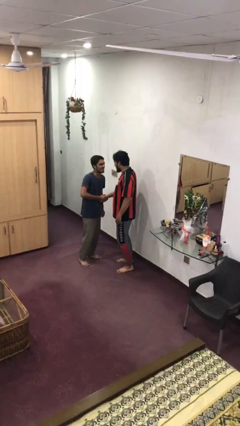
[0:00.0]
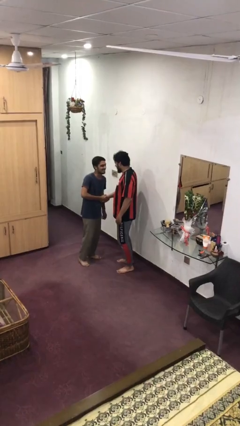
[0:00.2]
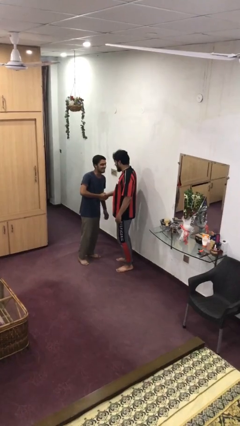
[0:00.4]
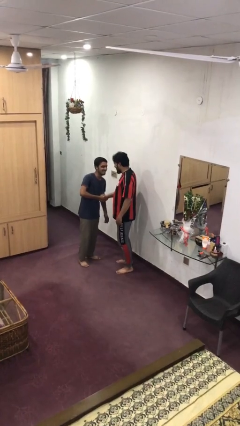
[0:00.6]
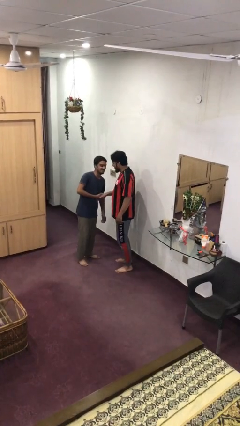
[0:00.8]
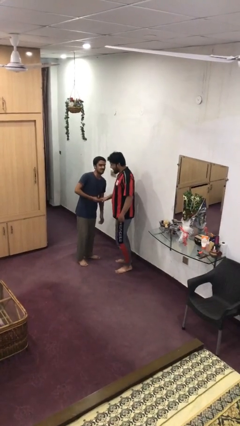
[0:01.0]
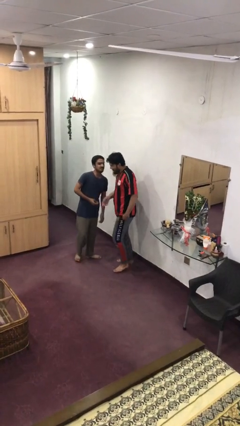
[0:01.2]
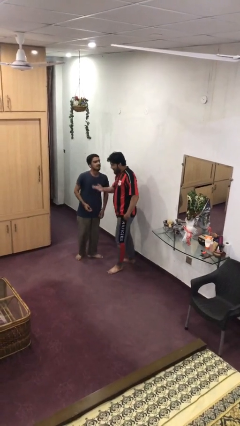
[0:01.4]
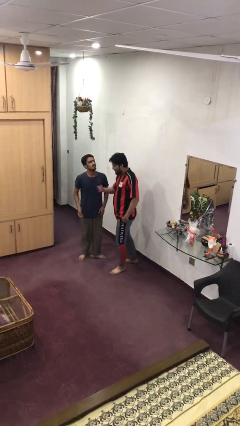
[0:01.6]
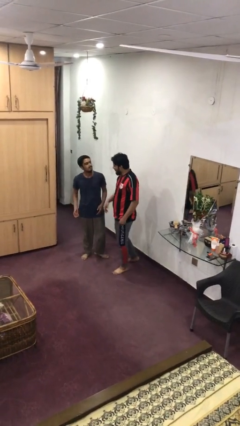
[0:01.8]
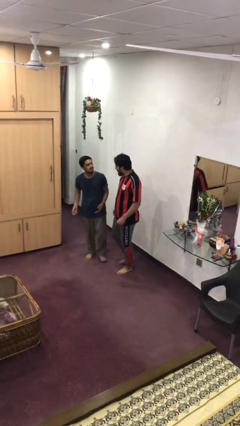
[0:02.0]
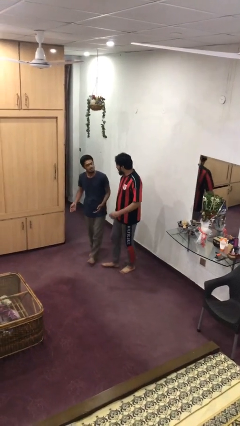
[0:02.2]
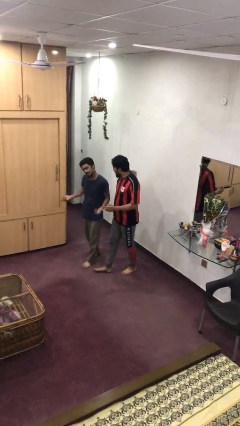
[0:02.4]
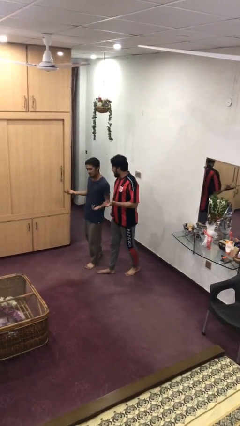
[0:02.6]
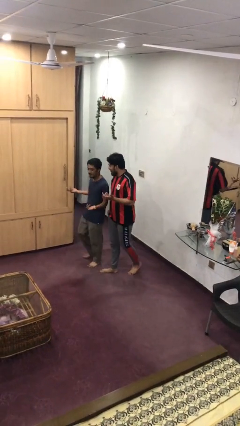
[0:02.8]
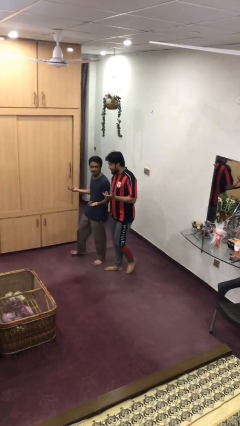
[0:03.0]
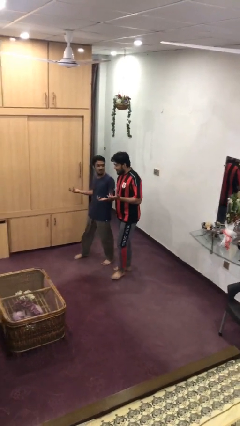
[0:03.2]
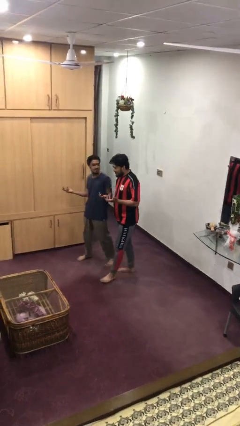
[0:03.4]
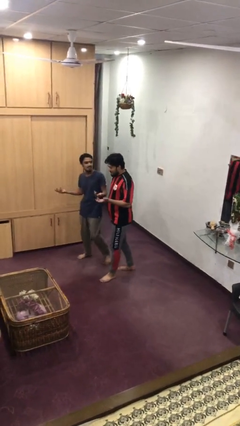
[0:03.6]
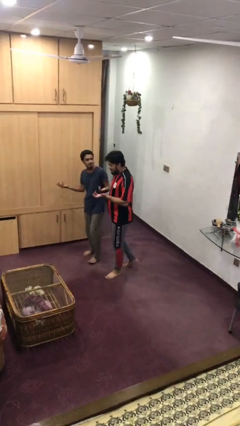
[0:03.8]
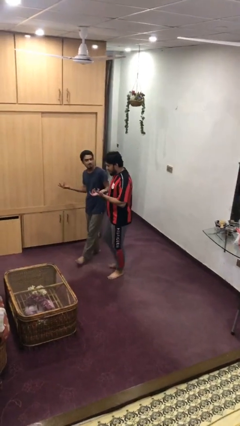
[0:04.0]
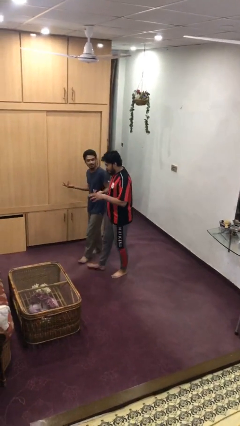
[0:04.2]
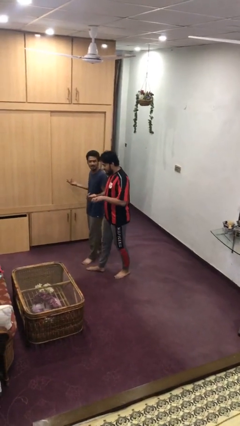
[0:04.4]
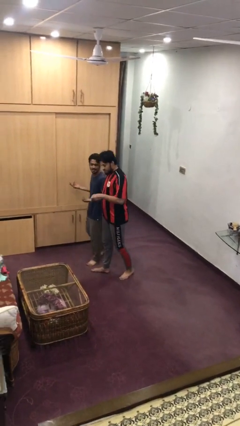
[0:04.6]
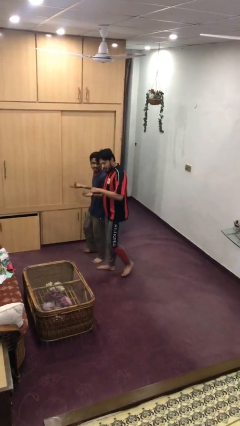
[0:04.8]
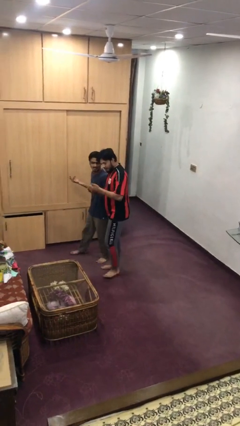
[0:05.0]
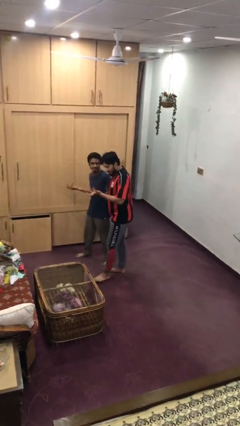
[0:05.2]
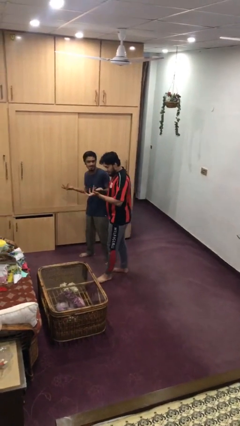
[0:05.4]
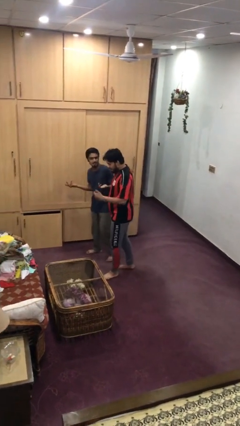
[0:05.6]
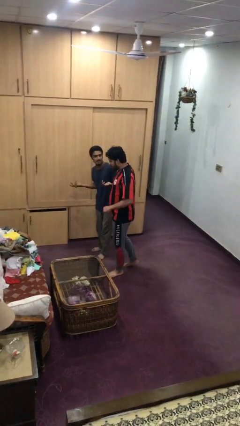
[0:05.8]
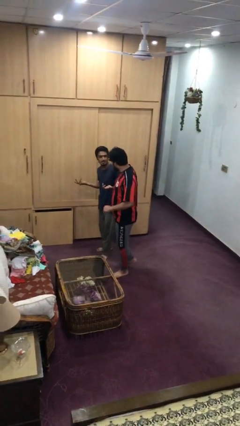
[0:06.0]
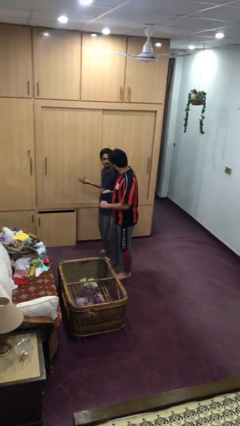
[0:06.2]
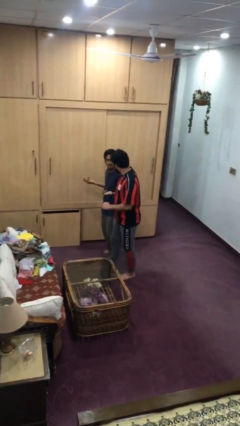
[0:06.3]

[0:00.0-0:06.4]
person talks to person

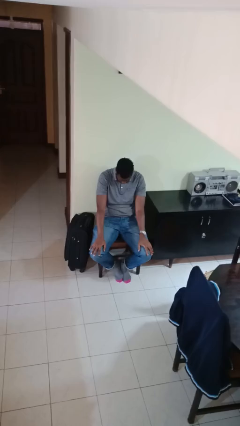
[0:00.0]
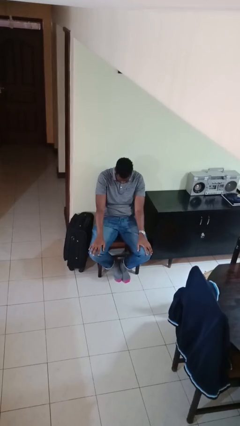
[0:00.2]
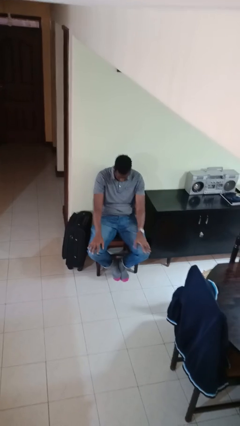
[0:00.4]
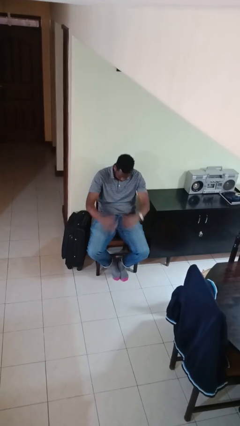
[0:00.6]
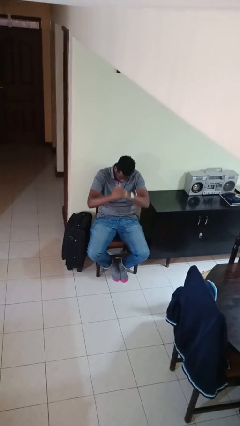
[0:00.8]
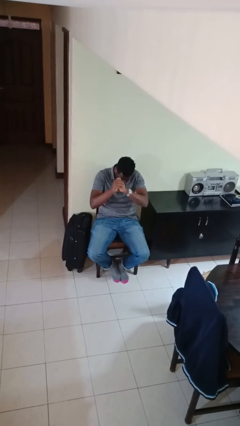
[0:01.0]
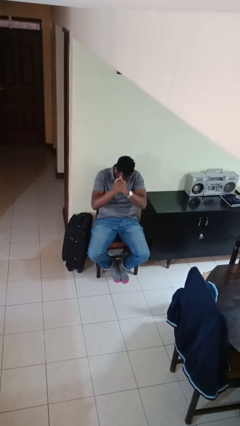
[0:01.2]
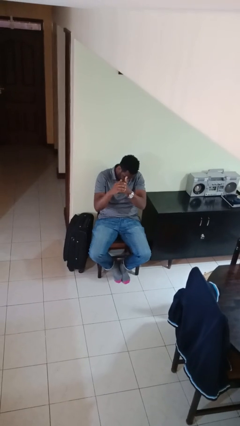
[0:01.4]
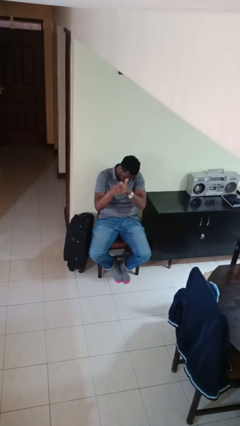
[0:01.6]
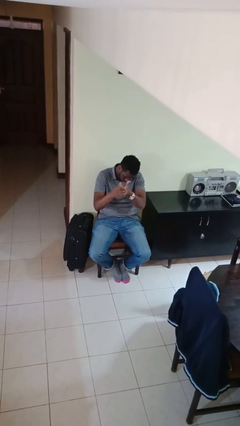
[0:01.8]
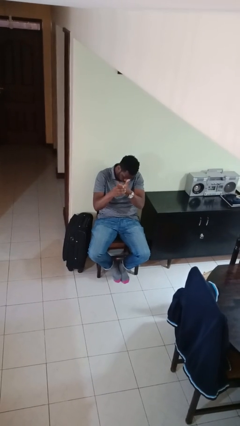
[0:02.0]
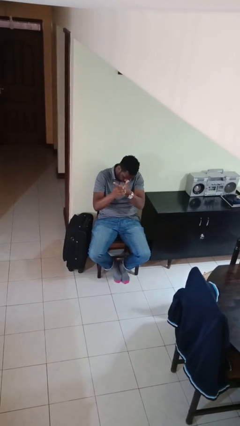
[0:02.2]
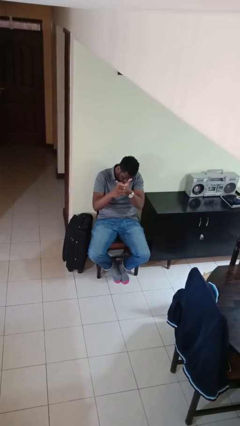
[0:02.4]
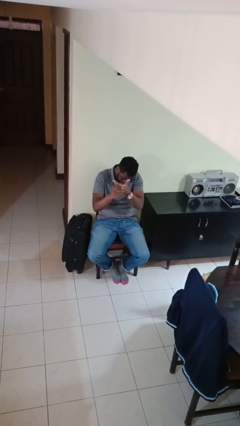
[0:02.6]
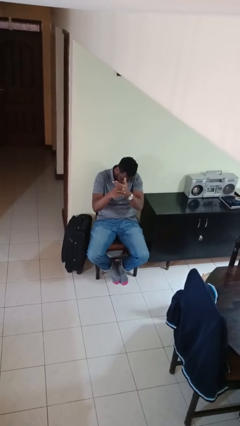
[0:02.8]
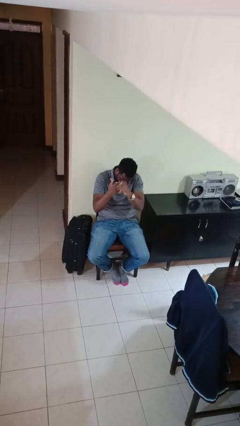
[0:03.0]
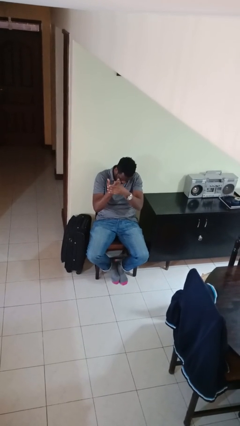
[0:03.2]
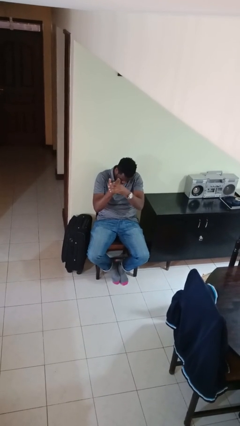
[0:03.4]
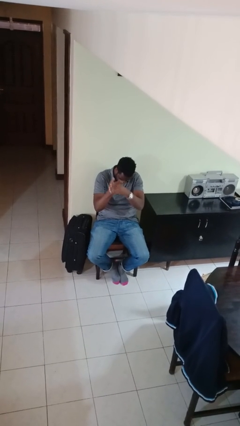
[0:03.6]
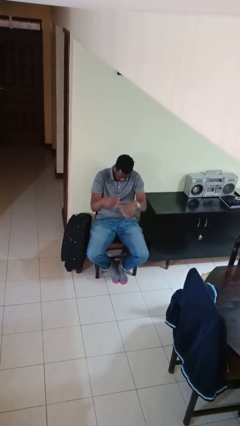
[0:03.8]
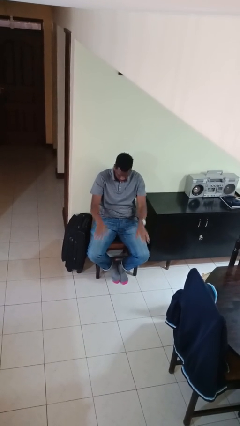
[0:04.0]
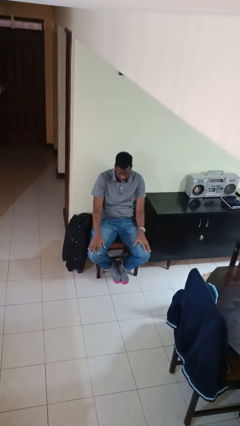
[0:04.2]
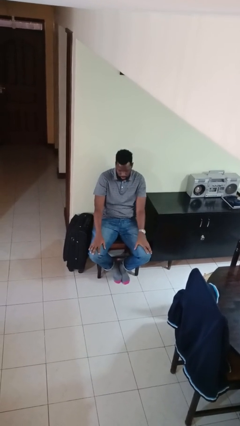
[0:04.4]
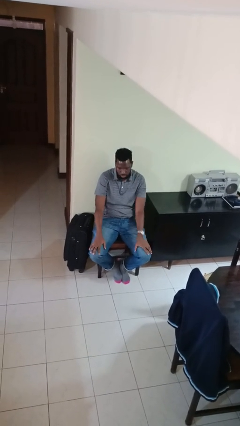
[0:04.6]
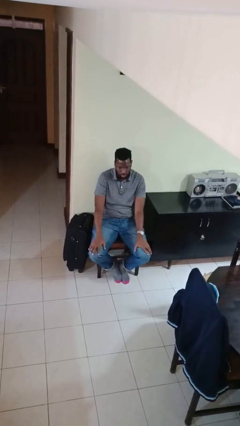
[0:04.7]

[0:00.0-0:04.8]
person cracks knuckles

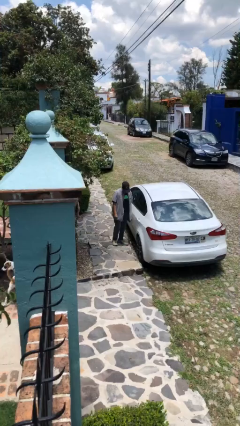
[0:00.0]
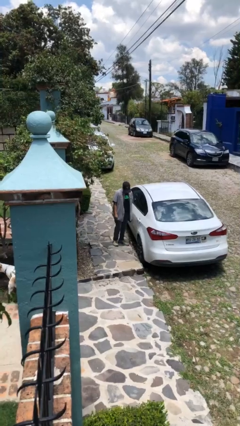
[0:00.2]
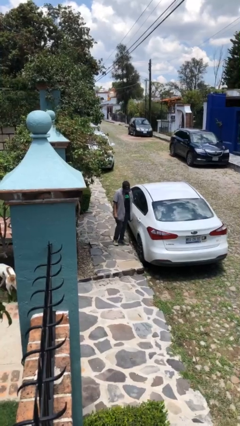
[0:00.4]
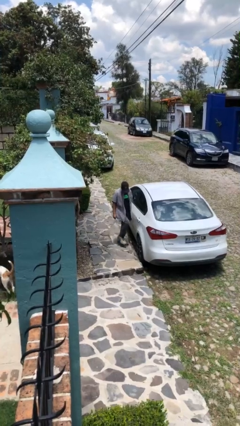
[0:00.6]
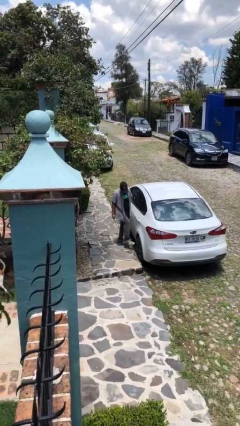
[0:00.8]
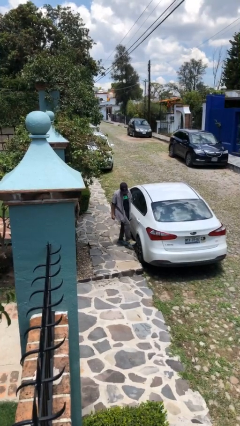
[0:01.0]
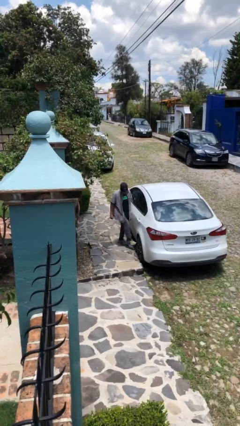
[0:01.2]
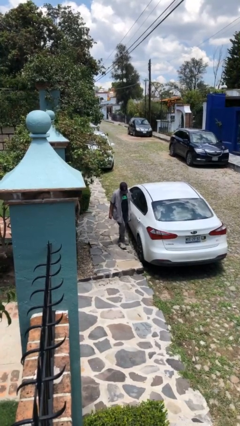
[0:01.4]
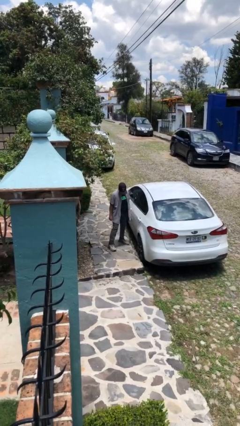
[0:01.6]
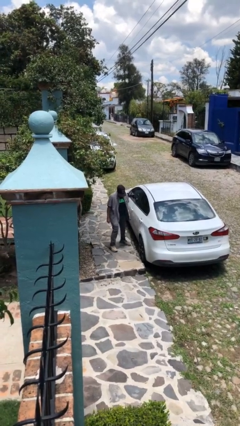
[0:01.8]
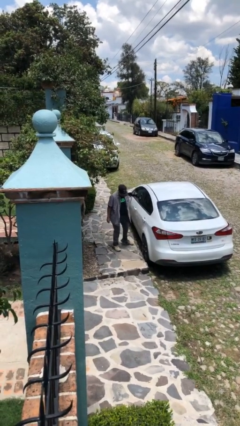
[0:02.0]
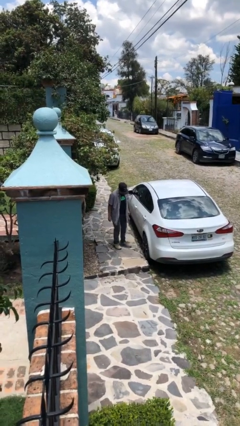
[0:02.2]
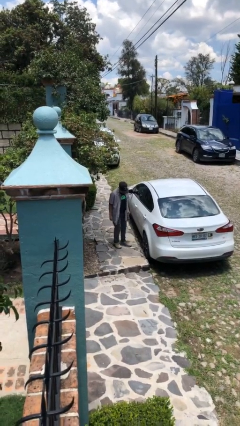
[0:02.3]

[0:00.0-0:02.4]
person kicks car tires

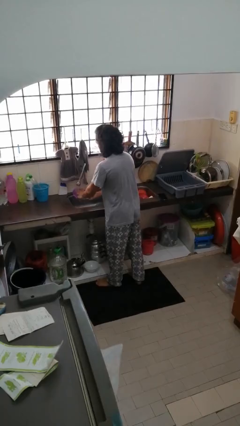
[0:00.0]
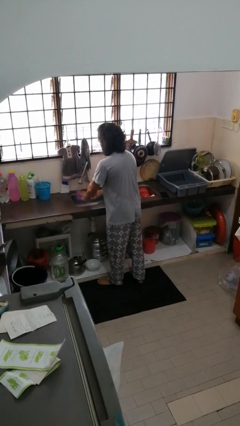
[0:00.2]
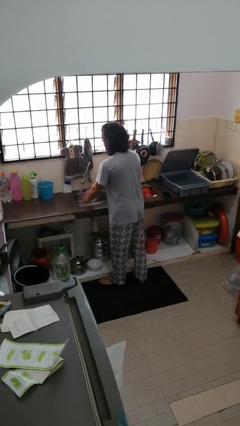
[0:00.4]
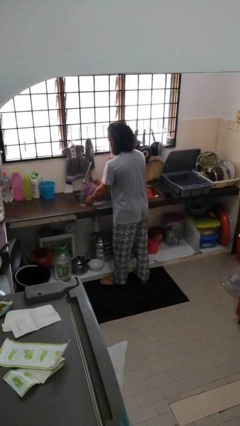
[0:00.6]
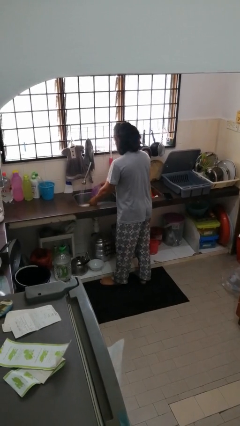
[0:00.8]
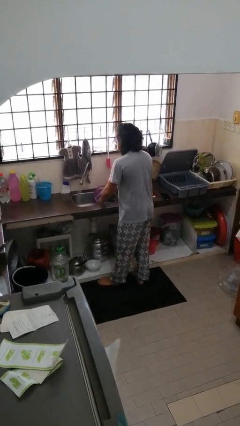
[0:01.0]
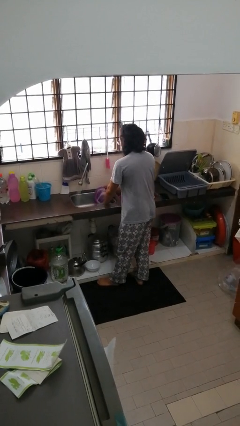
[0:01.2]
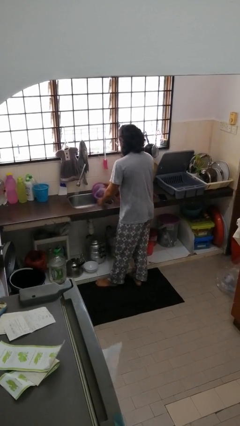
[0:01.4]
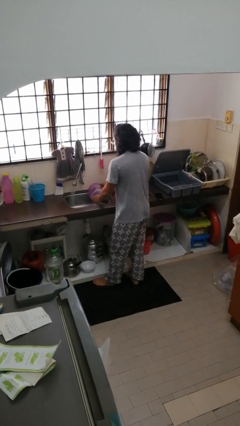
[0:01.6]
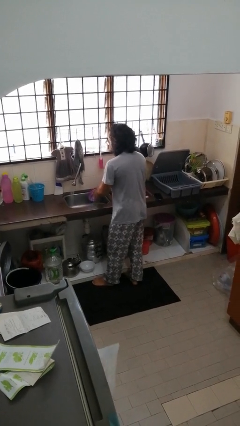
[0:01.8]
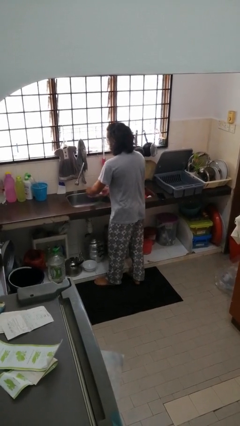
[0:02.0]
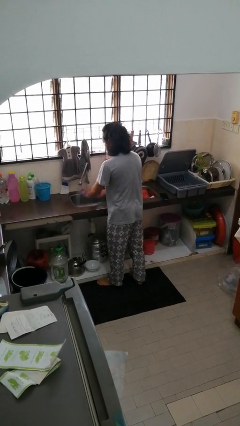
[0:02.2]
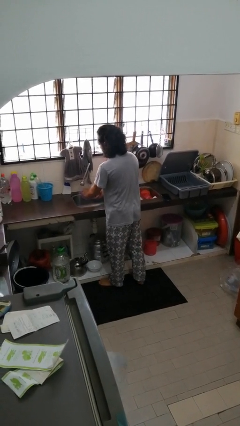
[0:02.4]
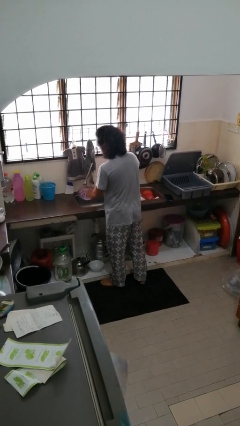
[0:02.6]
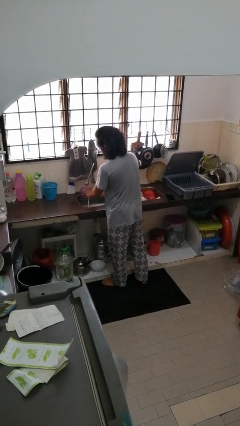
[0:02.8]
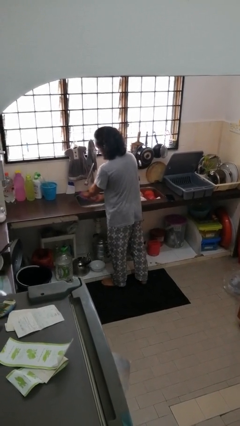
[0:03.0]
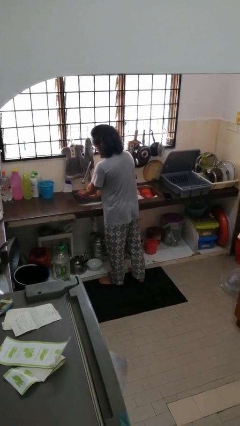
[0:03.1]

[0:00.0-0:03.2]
person washes dish

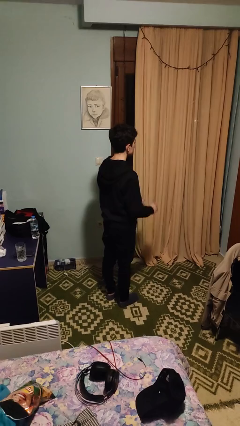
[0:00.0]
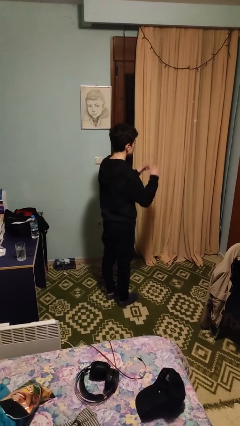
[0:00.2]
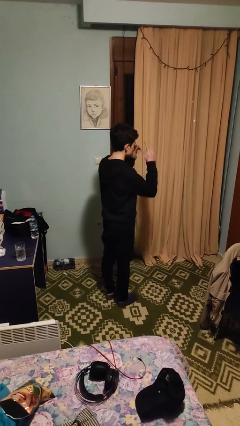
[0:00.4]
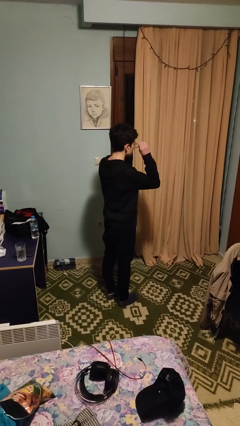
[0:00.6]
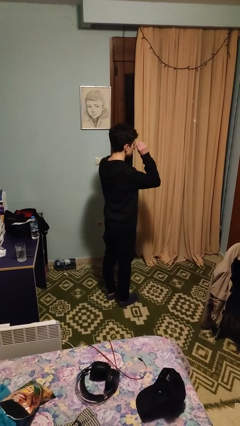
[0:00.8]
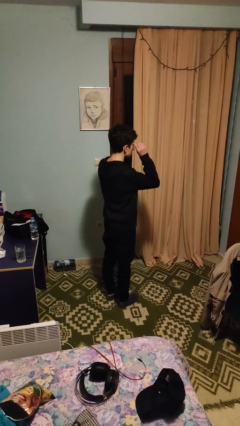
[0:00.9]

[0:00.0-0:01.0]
person puts on glasses
